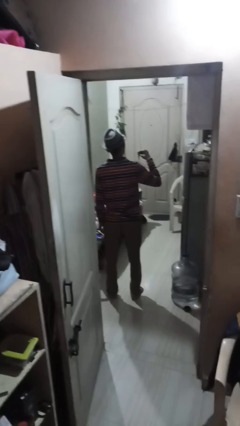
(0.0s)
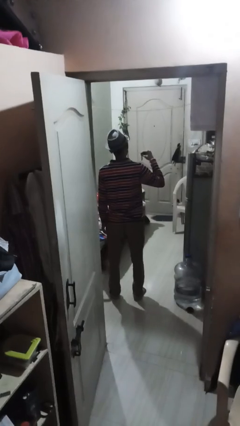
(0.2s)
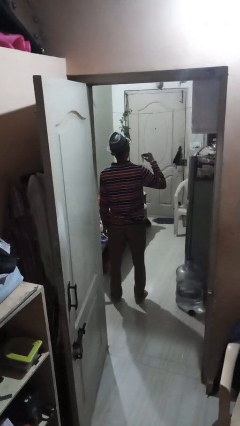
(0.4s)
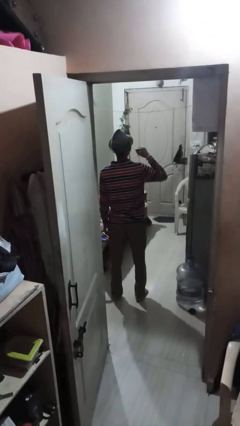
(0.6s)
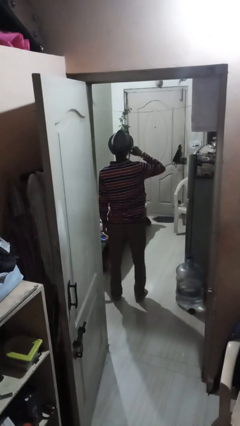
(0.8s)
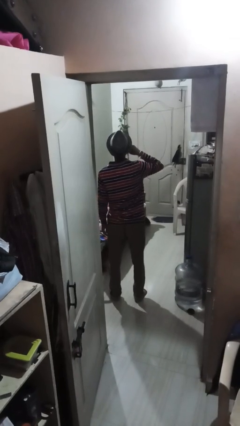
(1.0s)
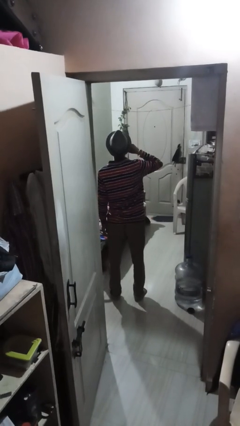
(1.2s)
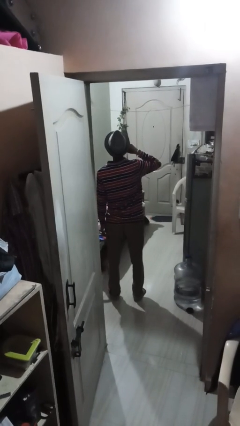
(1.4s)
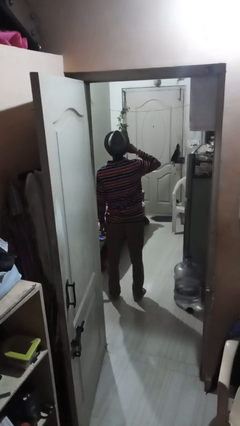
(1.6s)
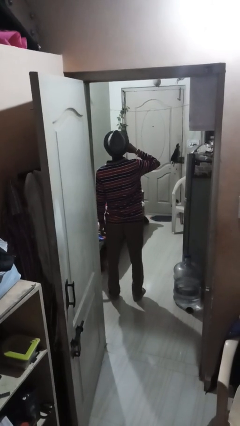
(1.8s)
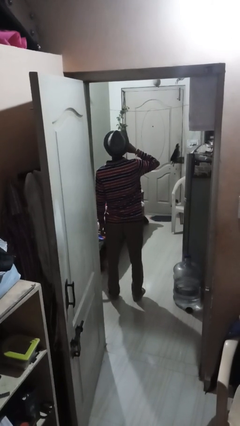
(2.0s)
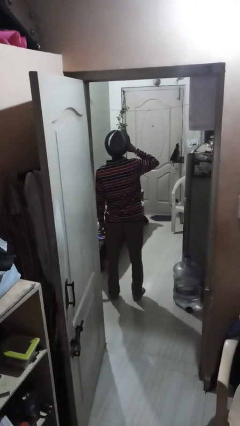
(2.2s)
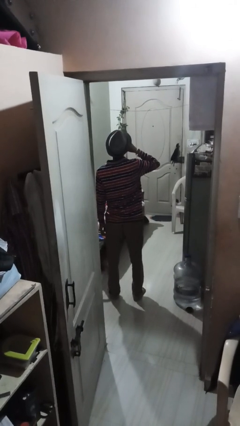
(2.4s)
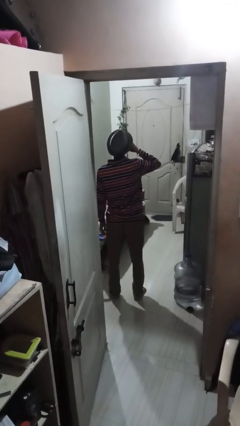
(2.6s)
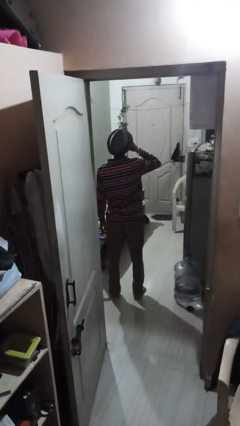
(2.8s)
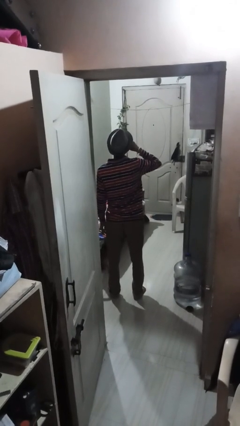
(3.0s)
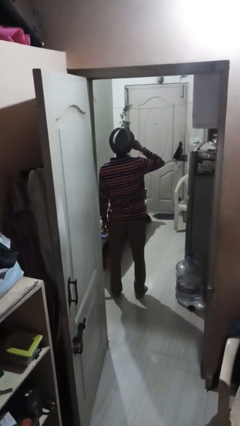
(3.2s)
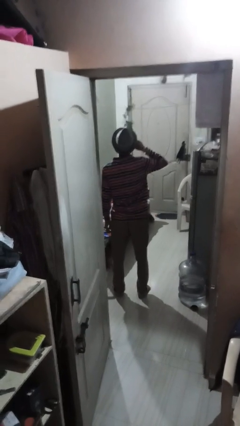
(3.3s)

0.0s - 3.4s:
person flosses

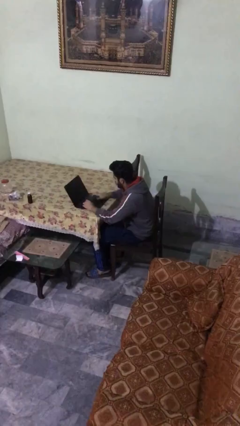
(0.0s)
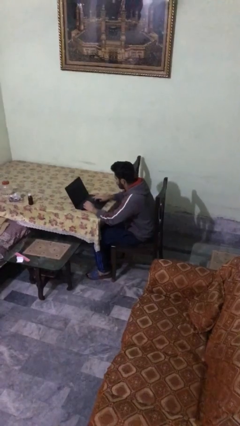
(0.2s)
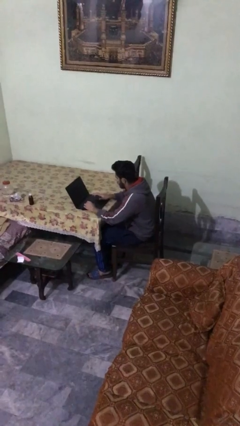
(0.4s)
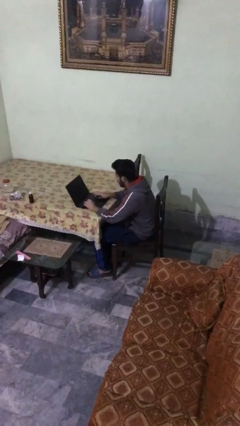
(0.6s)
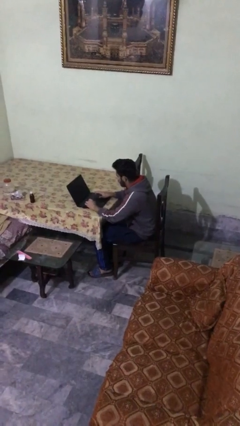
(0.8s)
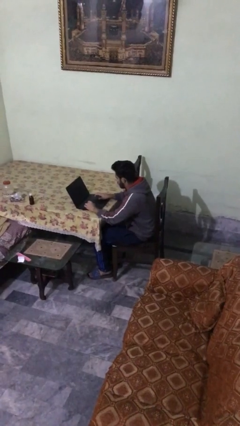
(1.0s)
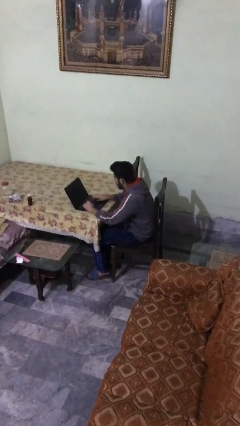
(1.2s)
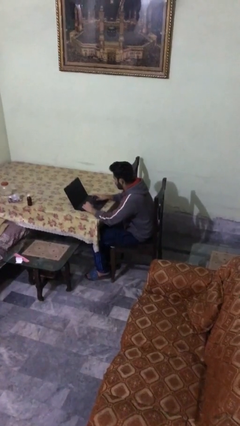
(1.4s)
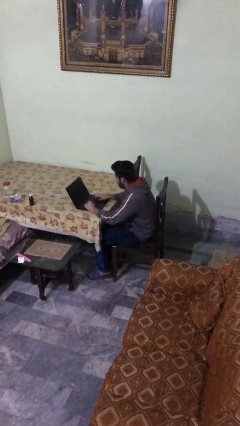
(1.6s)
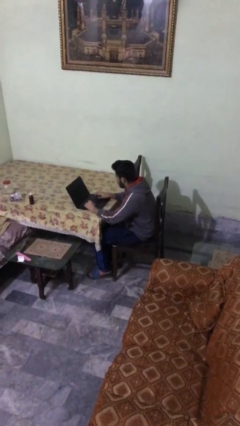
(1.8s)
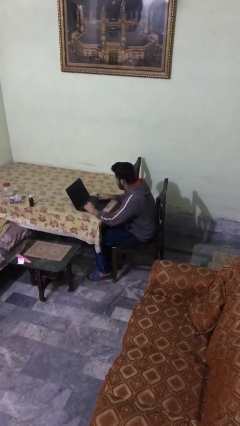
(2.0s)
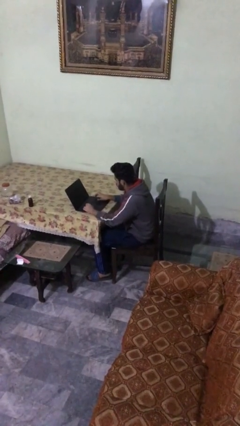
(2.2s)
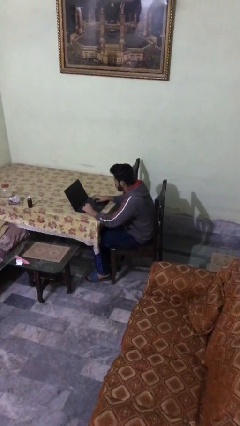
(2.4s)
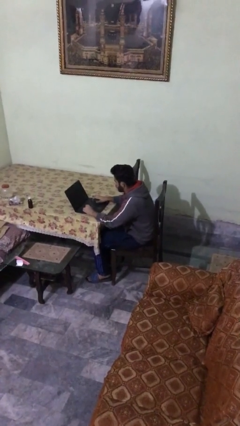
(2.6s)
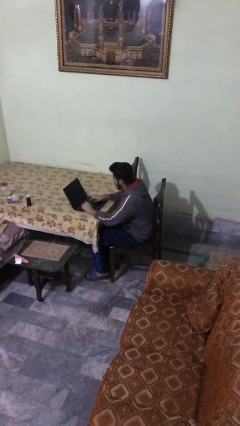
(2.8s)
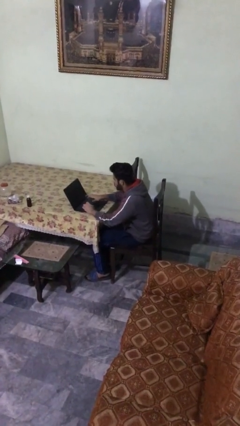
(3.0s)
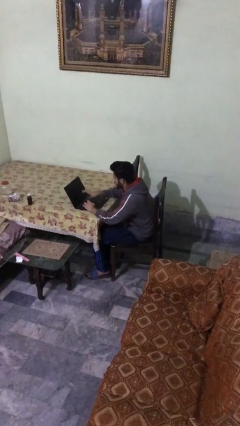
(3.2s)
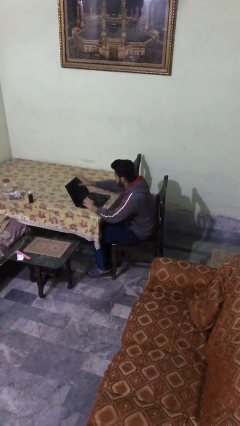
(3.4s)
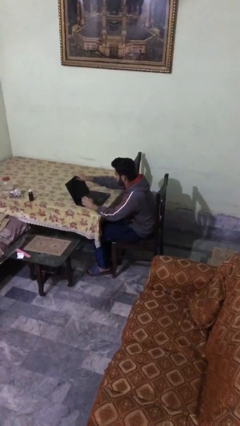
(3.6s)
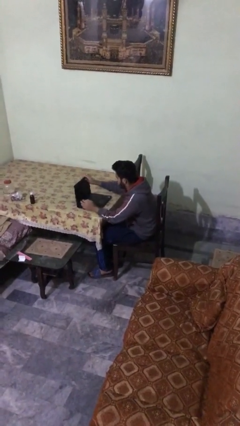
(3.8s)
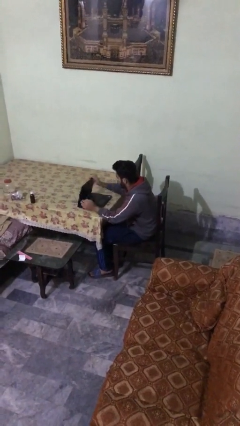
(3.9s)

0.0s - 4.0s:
person interacts with laptop

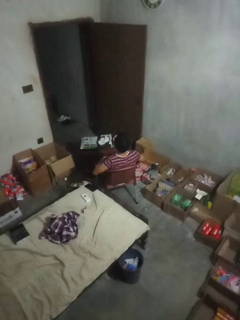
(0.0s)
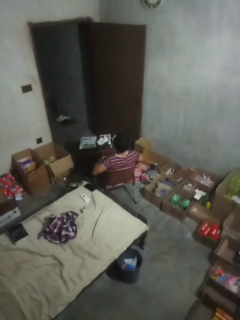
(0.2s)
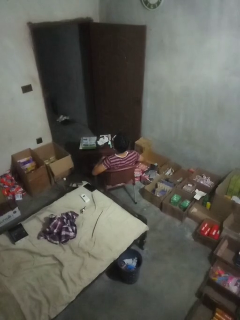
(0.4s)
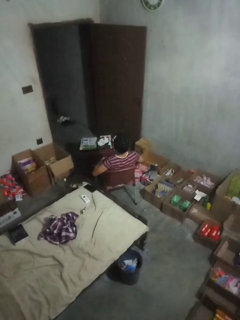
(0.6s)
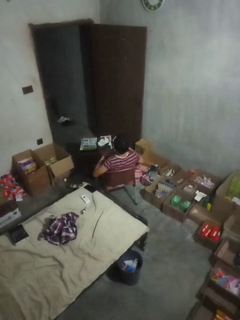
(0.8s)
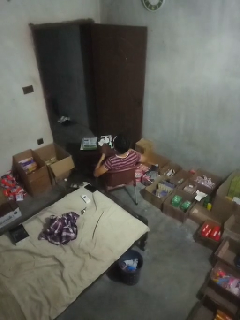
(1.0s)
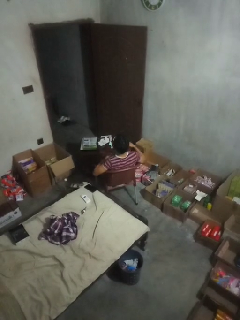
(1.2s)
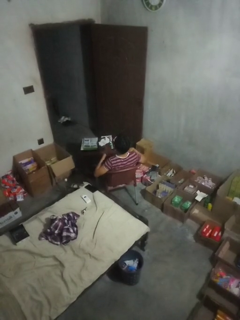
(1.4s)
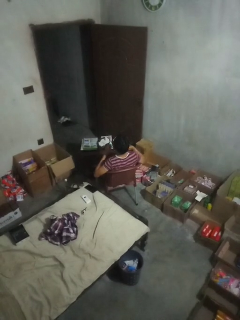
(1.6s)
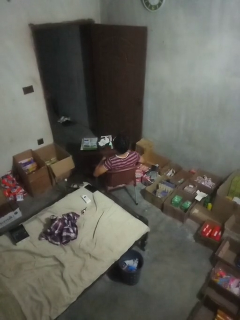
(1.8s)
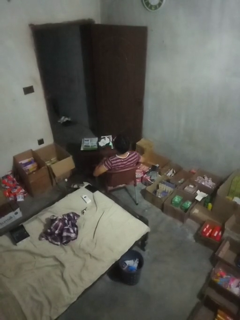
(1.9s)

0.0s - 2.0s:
person drums on chest

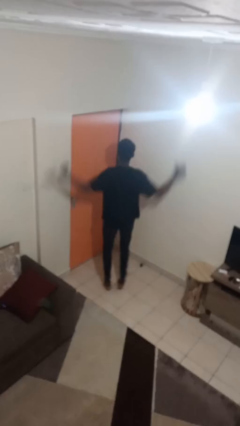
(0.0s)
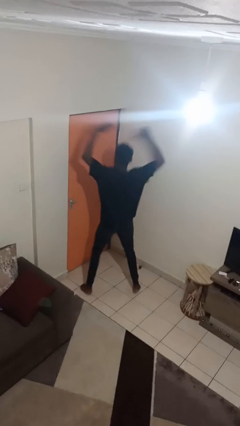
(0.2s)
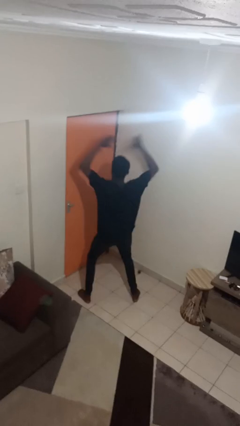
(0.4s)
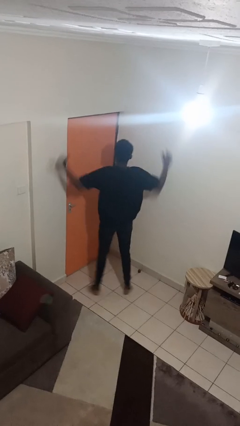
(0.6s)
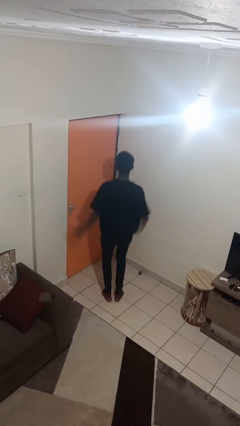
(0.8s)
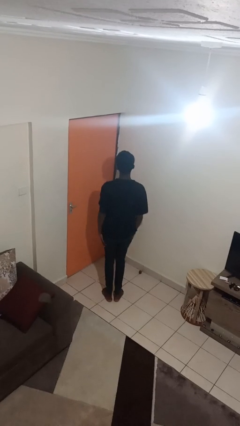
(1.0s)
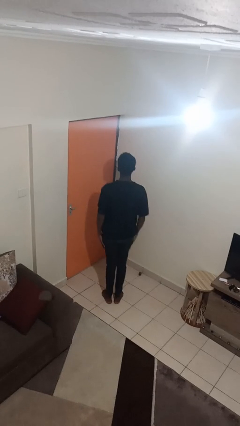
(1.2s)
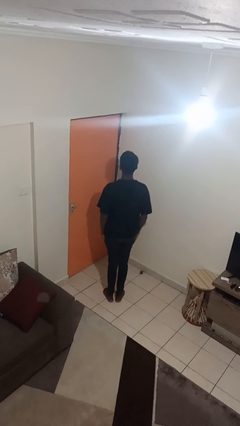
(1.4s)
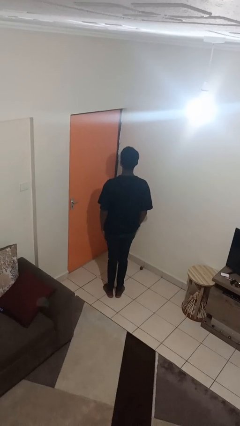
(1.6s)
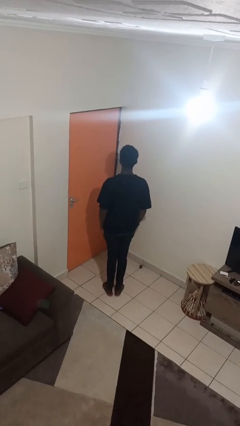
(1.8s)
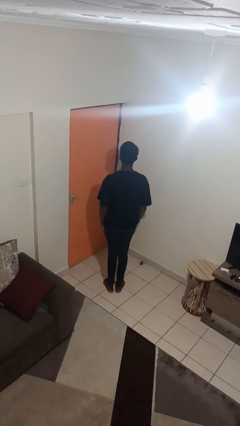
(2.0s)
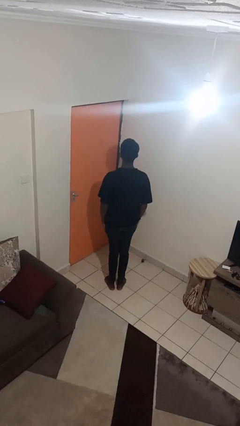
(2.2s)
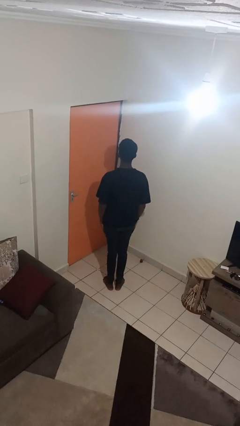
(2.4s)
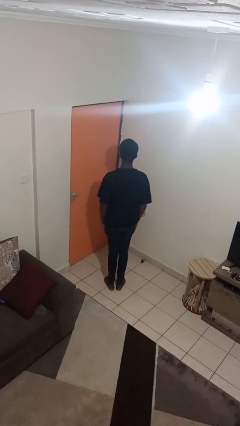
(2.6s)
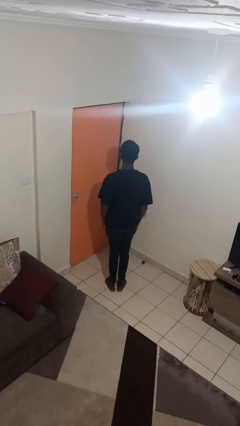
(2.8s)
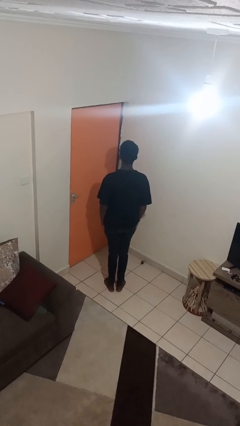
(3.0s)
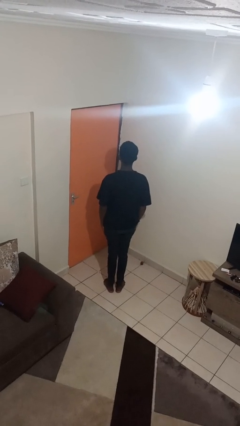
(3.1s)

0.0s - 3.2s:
person exercises with jumping jacks

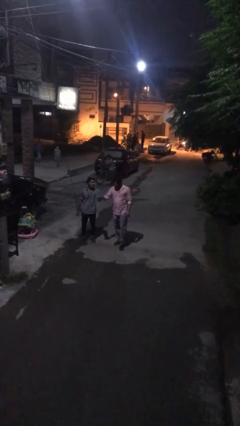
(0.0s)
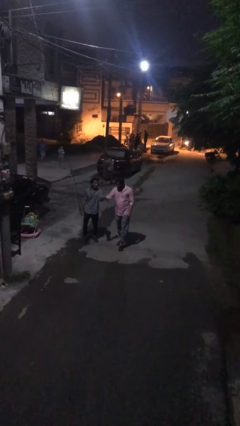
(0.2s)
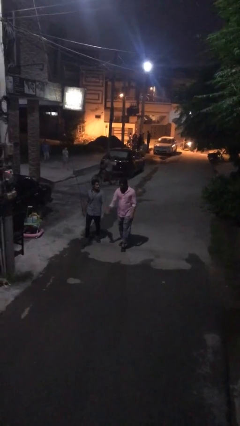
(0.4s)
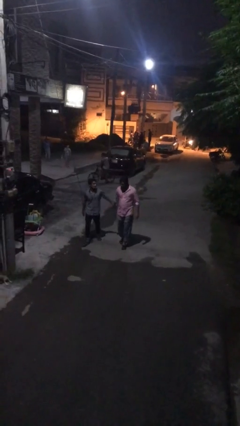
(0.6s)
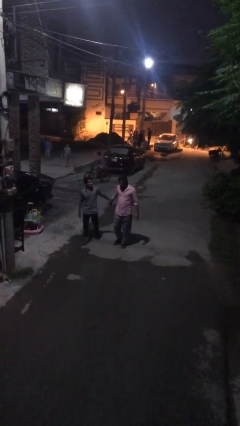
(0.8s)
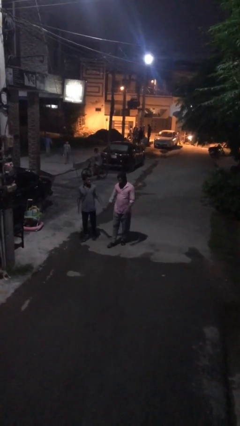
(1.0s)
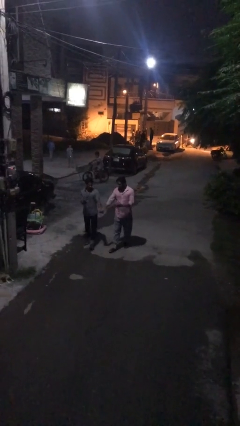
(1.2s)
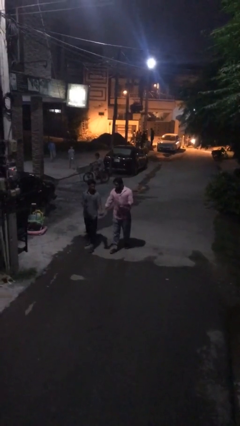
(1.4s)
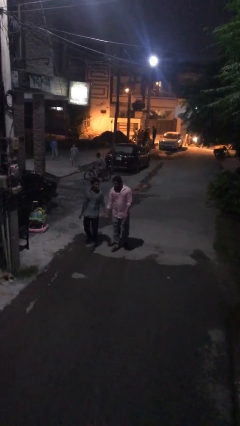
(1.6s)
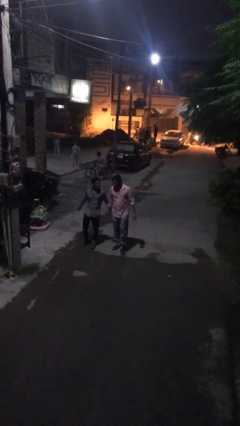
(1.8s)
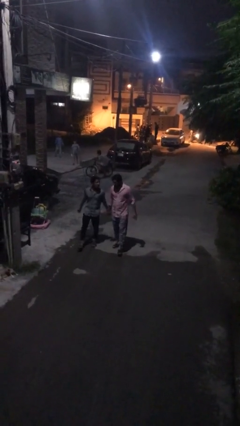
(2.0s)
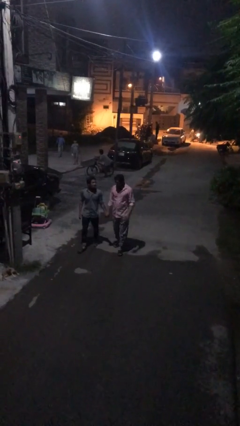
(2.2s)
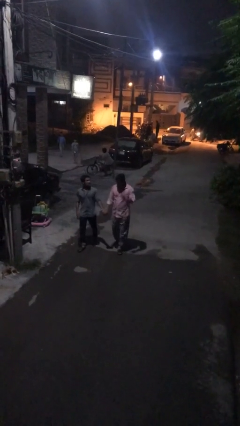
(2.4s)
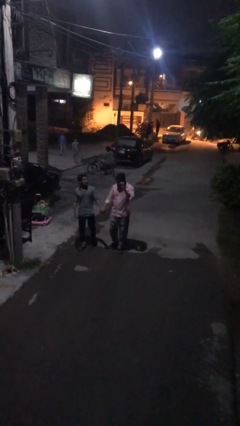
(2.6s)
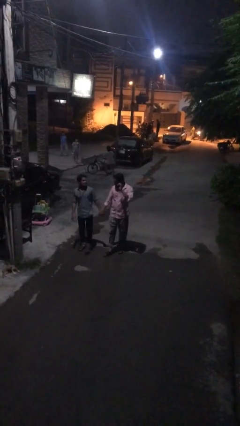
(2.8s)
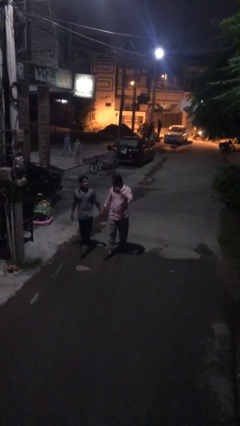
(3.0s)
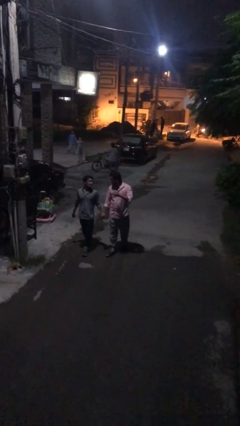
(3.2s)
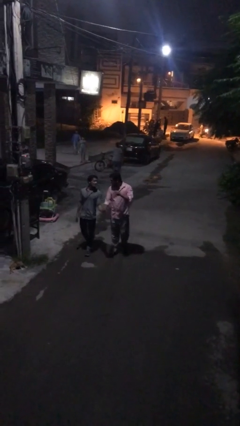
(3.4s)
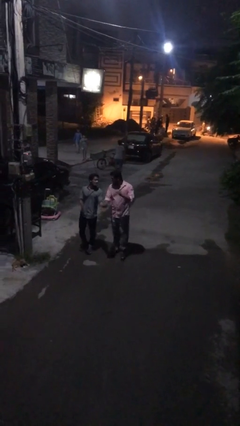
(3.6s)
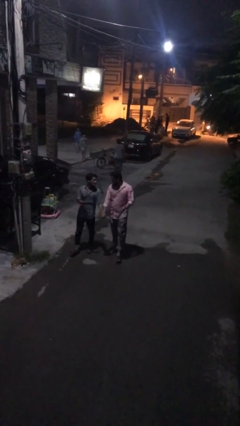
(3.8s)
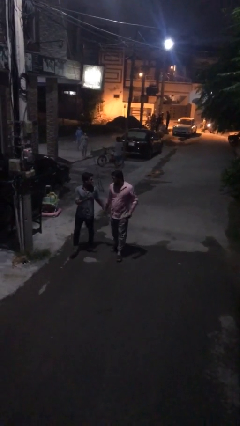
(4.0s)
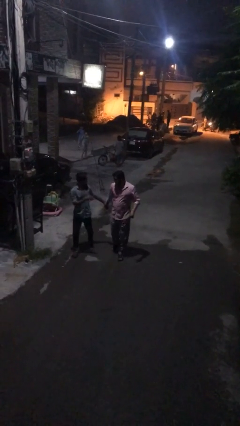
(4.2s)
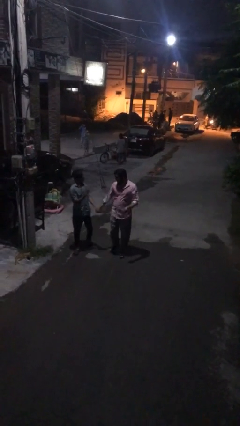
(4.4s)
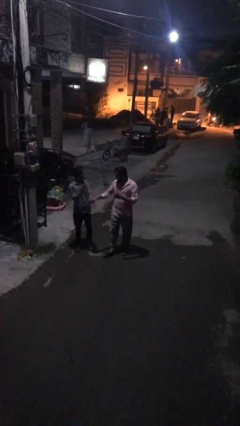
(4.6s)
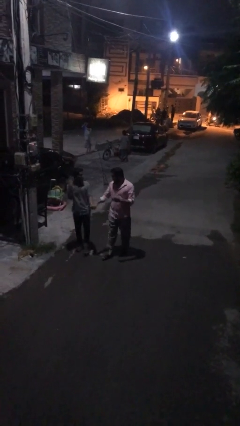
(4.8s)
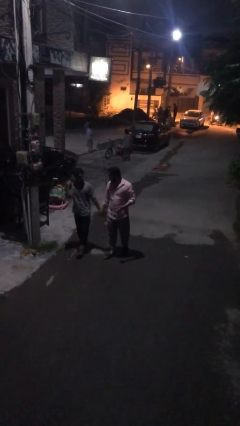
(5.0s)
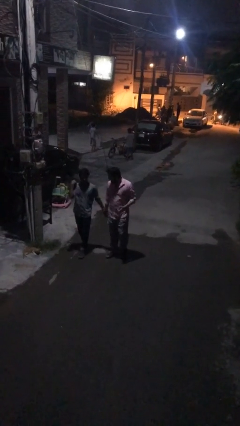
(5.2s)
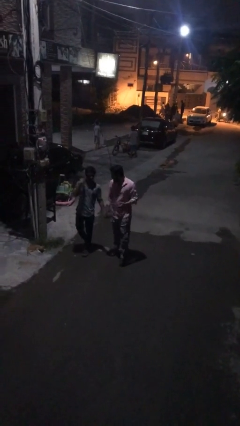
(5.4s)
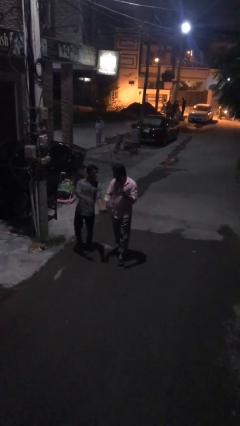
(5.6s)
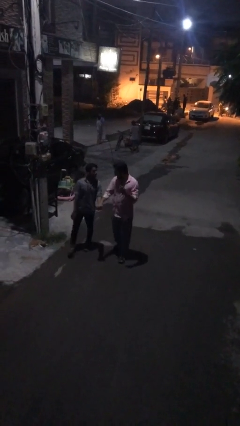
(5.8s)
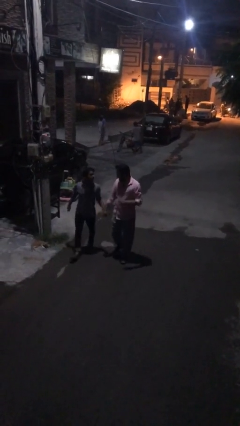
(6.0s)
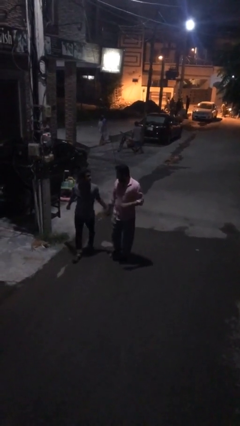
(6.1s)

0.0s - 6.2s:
person holds hand
